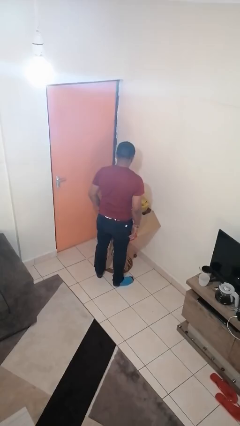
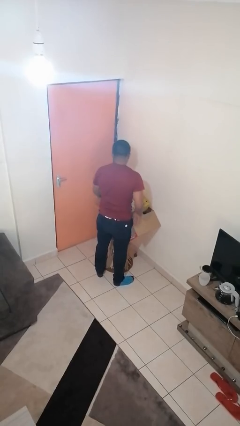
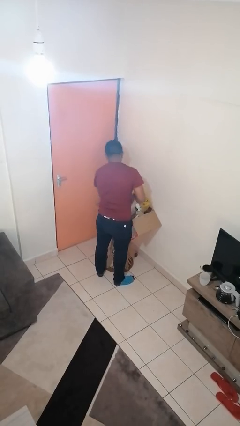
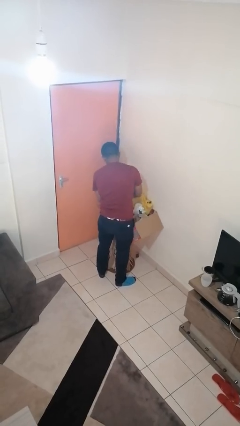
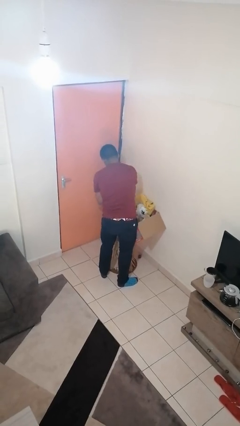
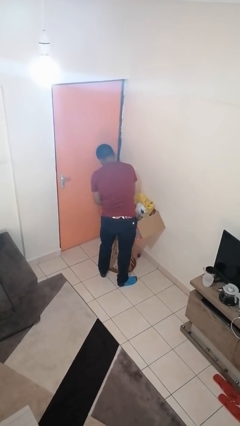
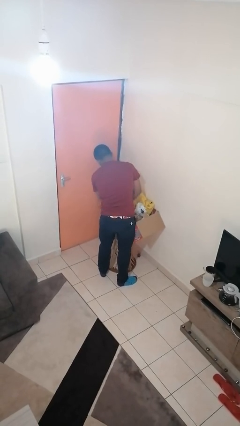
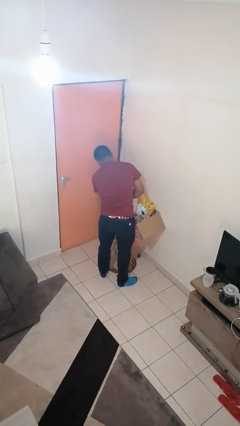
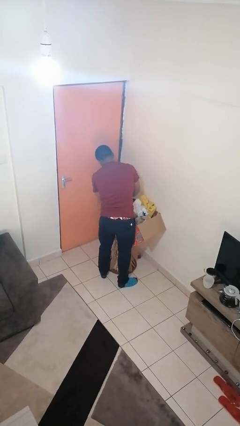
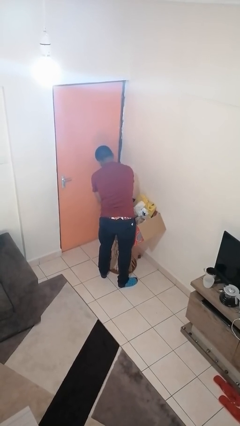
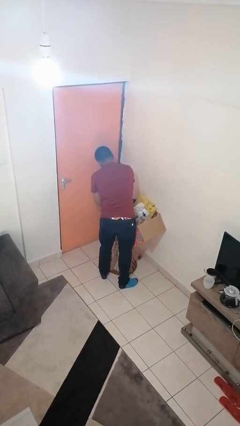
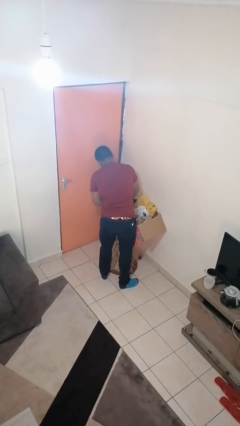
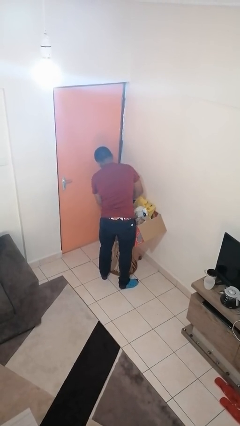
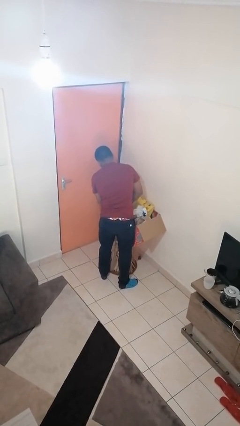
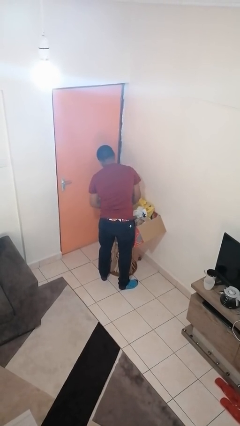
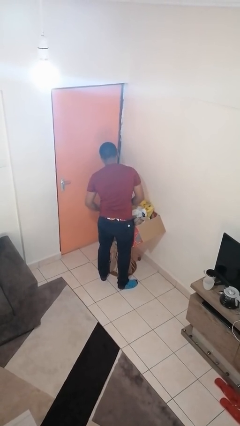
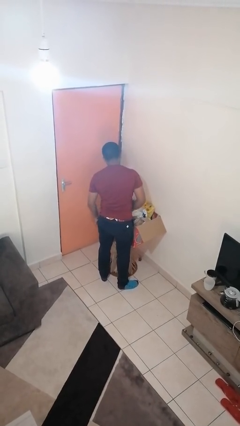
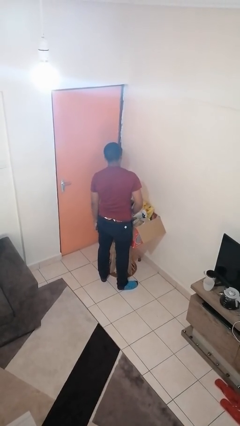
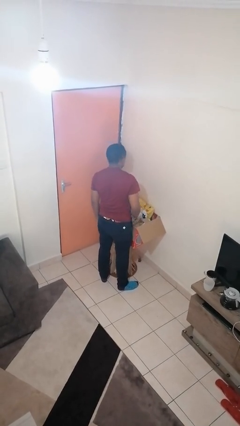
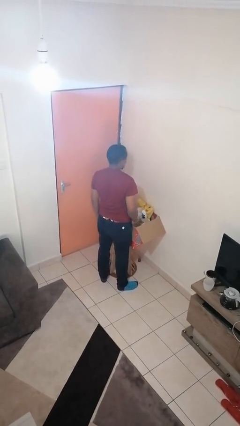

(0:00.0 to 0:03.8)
person searches in box

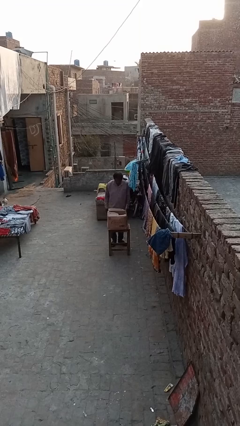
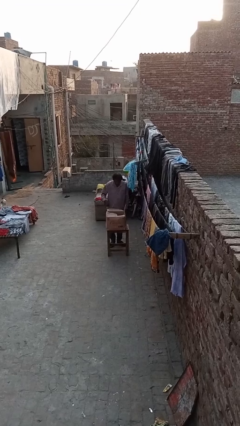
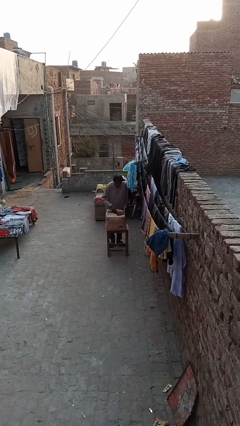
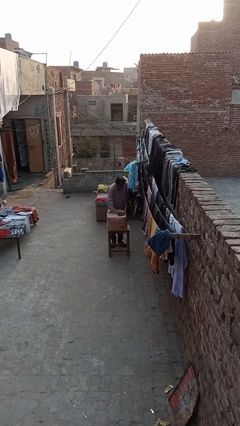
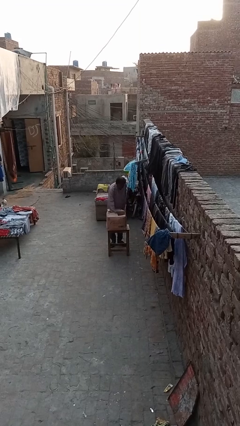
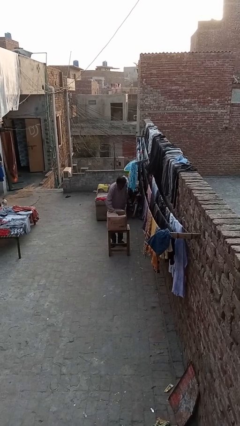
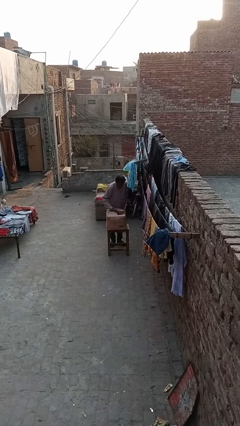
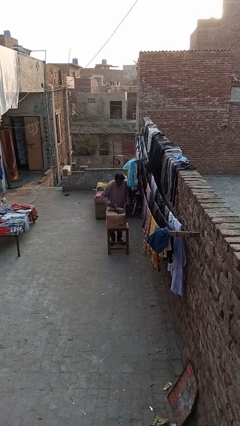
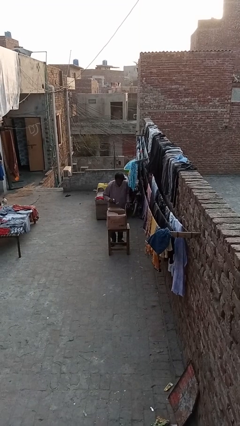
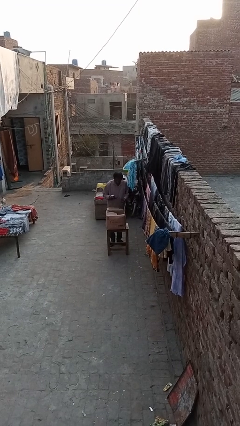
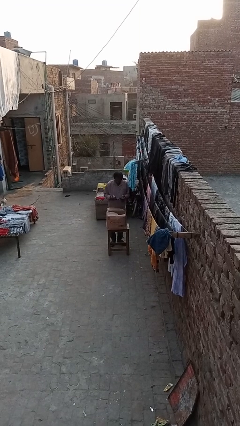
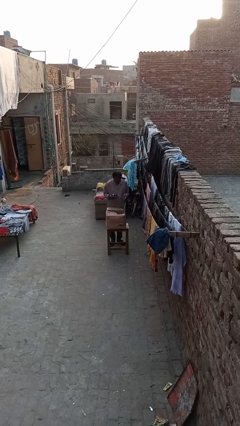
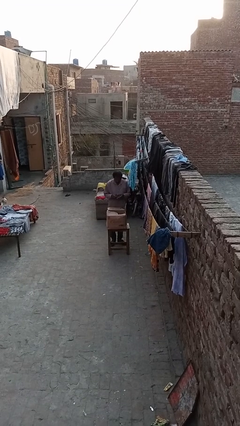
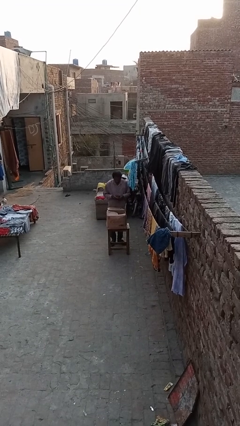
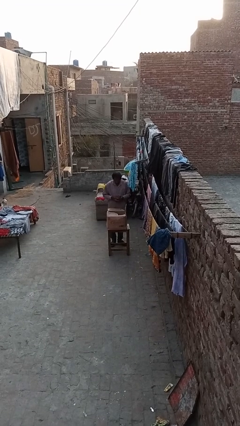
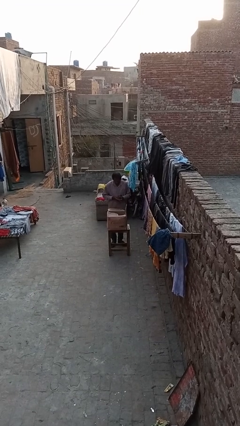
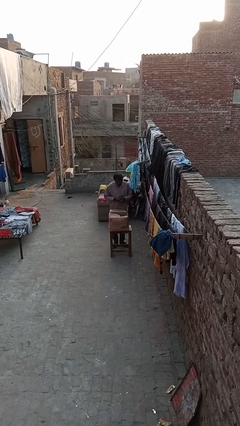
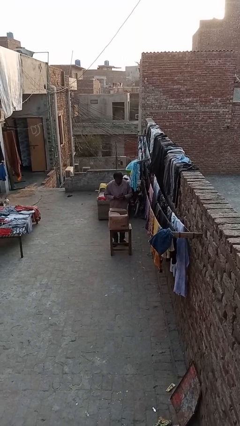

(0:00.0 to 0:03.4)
person takes object from box

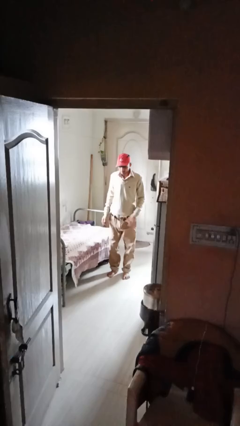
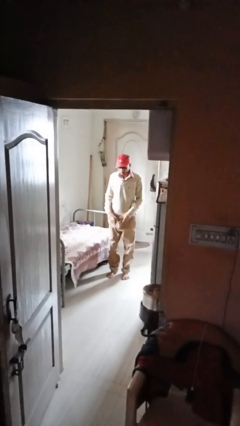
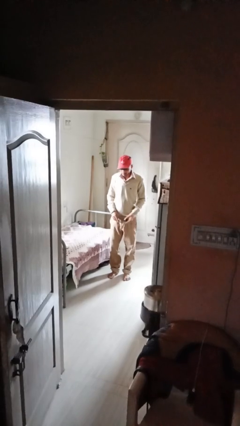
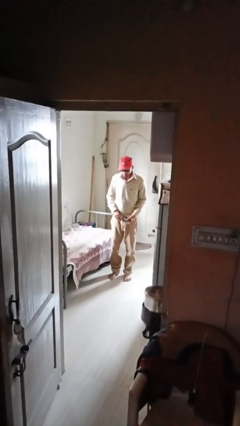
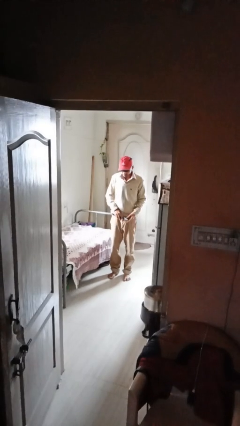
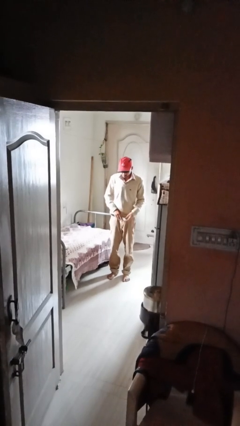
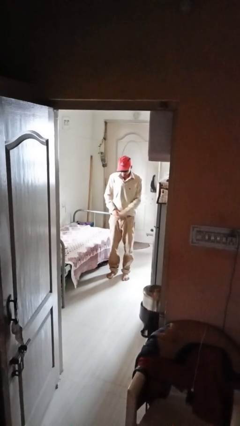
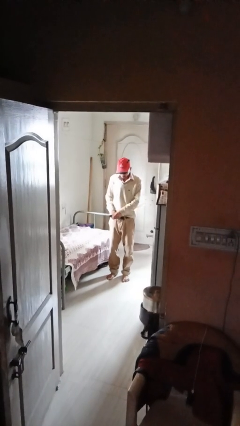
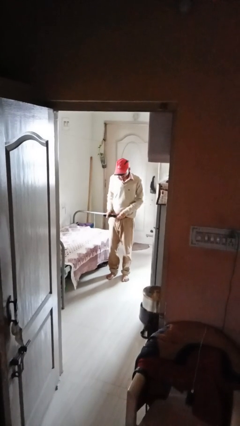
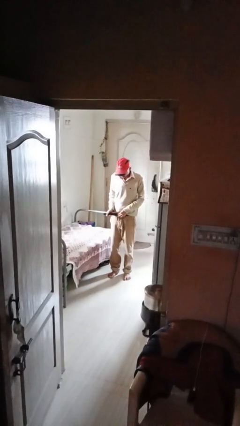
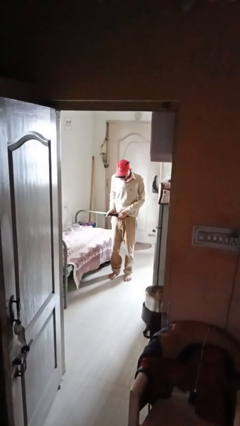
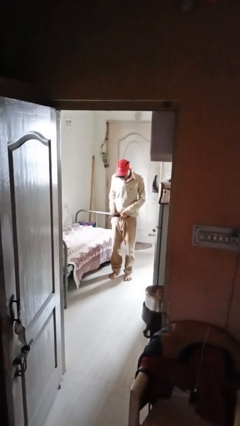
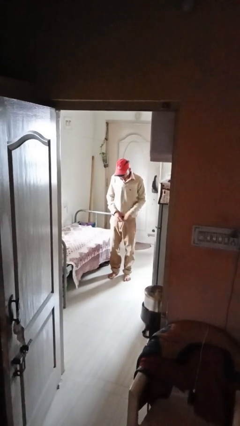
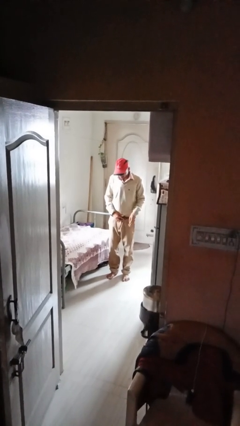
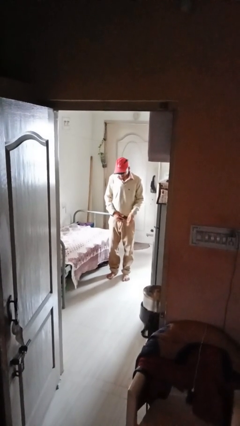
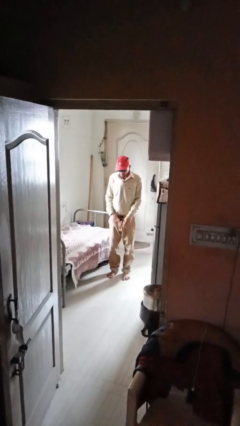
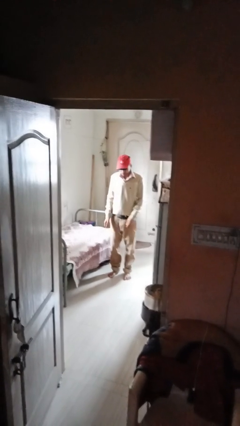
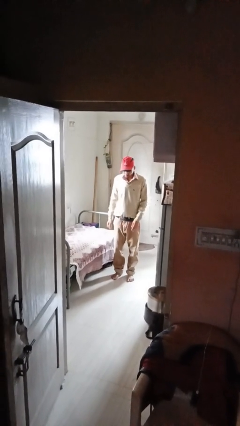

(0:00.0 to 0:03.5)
person puts on belt

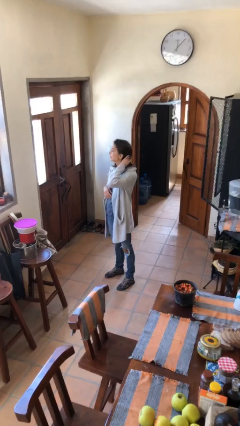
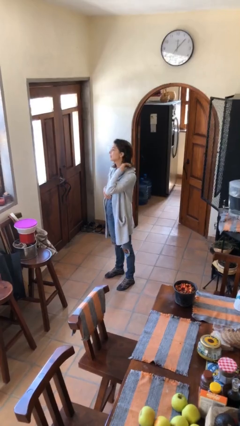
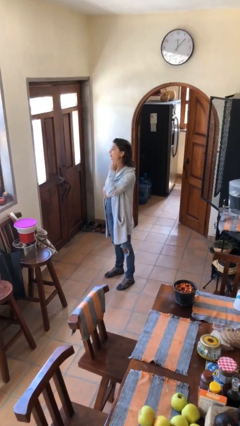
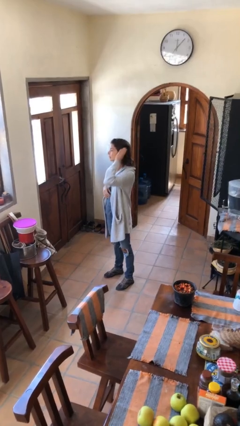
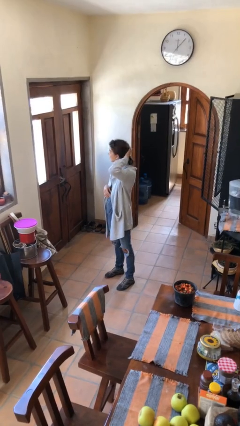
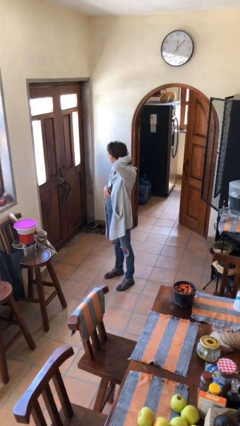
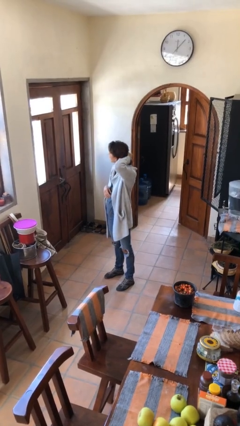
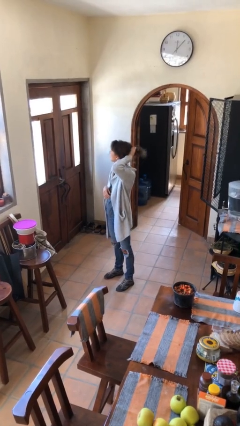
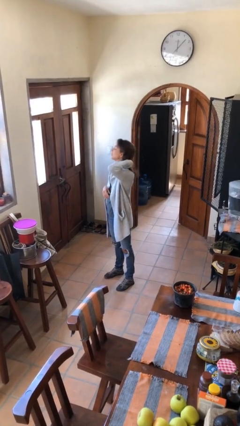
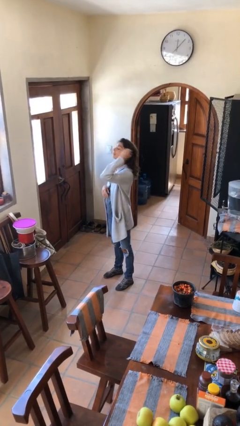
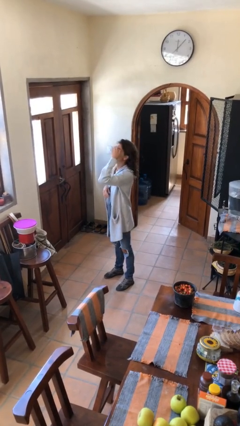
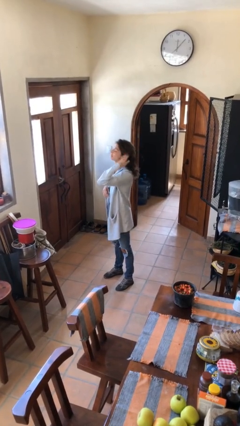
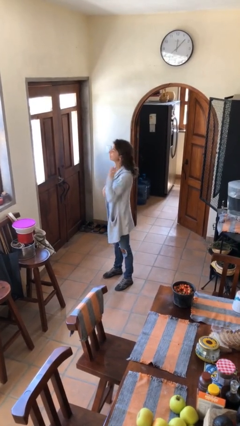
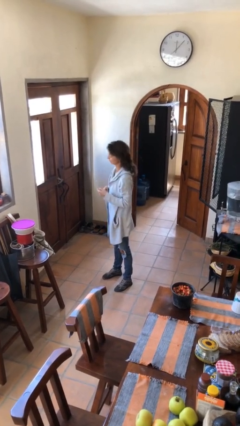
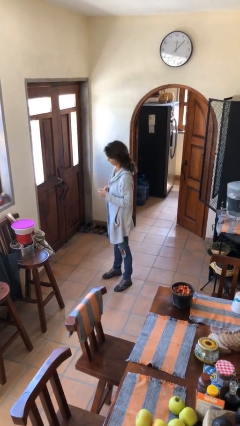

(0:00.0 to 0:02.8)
person strokes hair

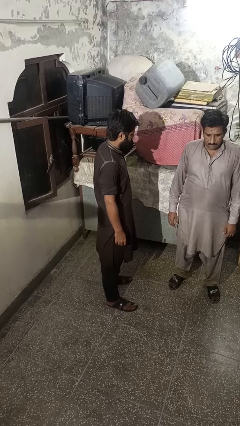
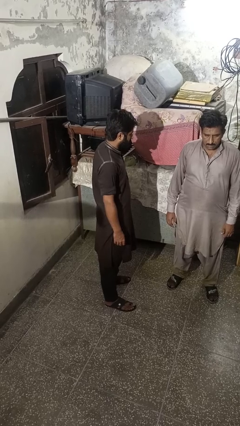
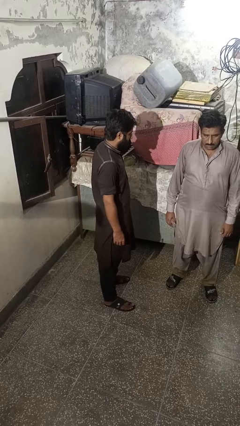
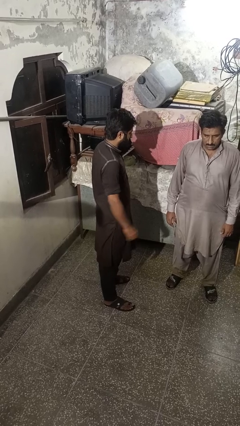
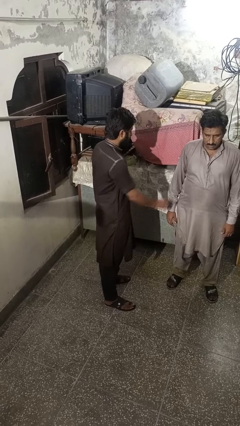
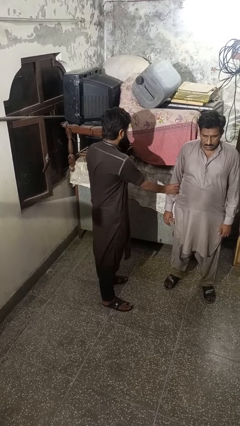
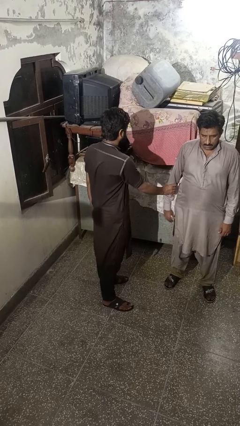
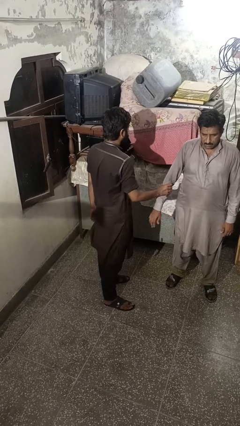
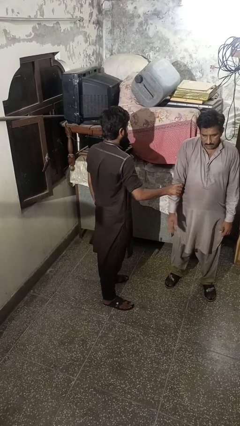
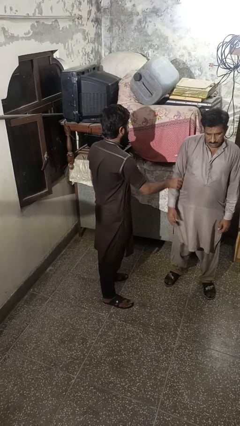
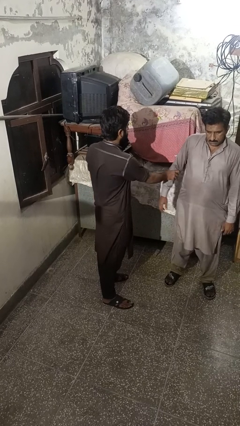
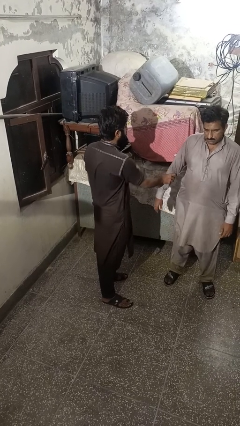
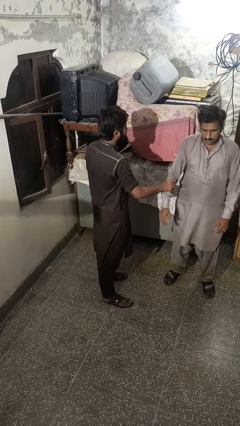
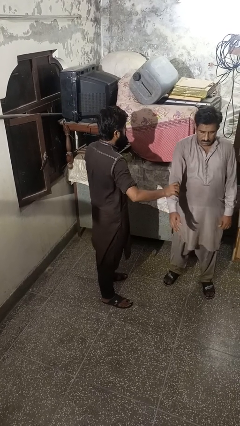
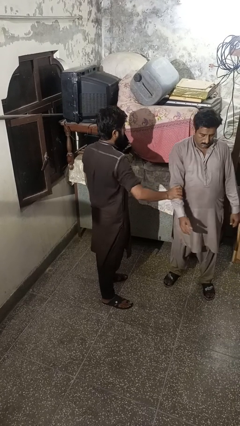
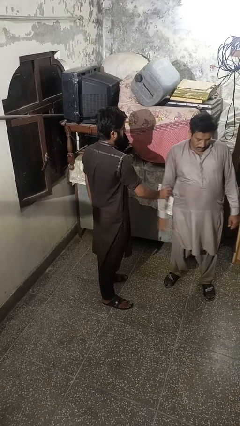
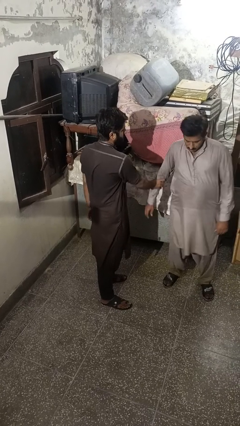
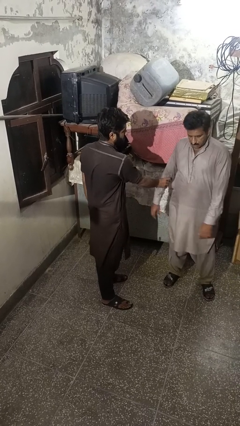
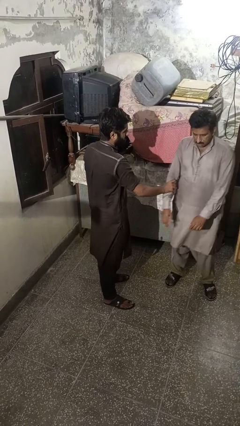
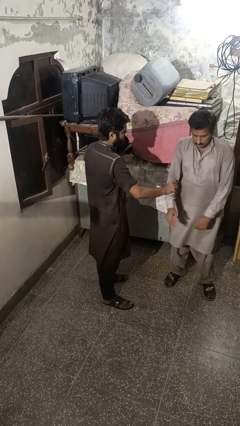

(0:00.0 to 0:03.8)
person grabs person by forearm
